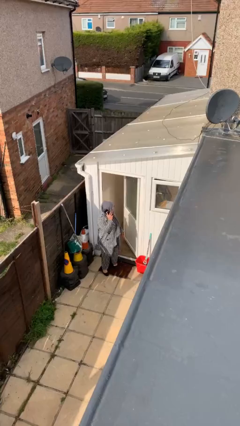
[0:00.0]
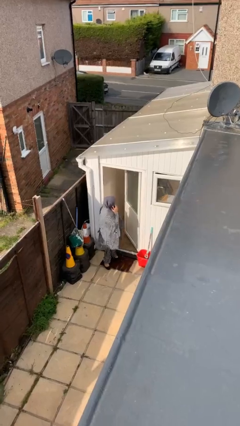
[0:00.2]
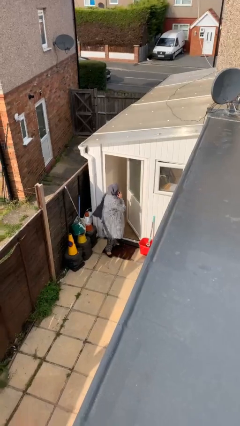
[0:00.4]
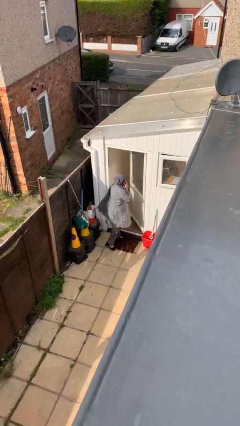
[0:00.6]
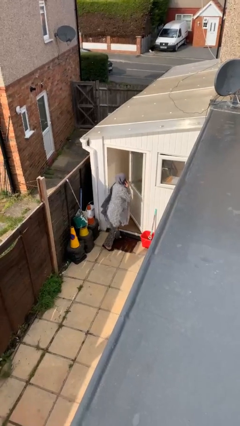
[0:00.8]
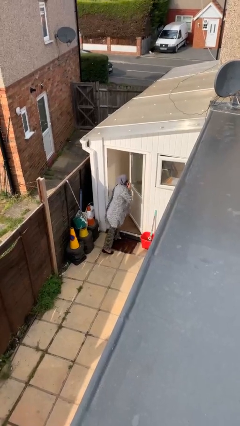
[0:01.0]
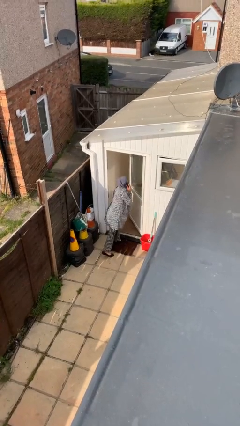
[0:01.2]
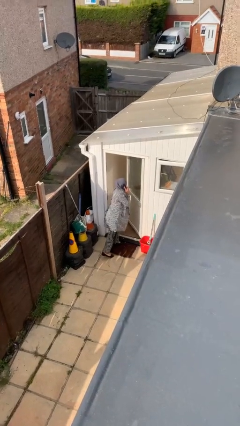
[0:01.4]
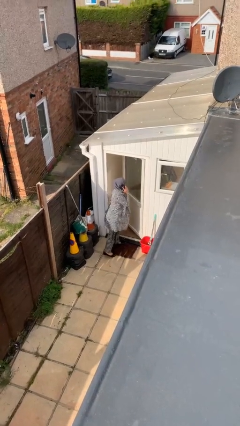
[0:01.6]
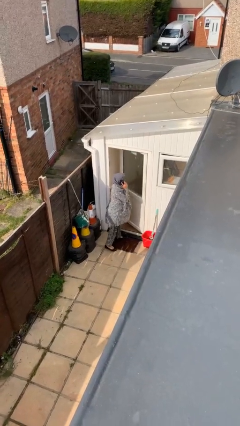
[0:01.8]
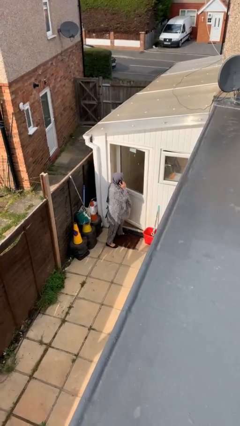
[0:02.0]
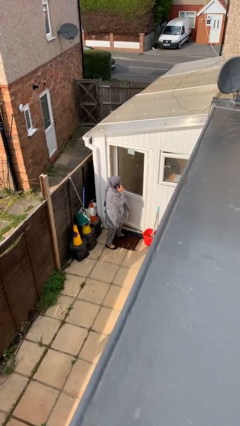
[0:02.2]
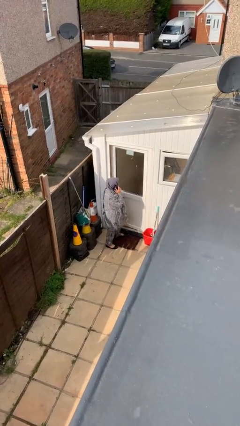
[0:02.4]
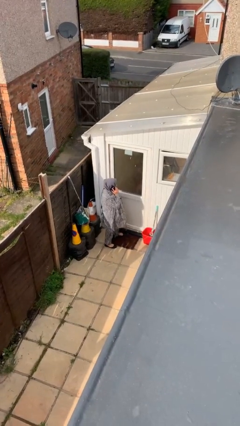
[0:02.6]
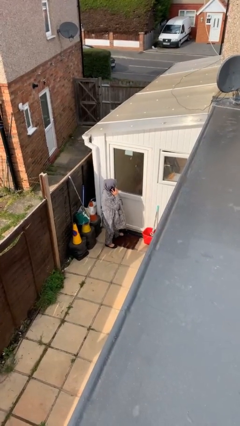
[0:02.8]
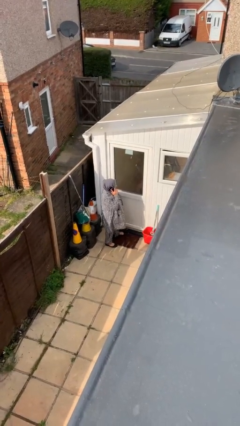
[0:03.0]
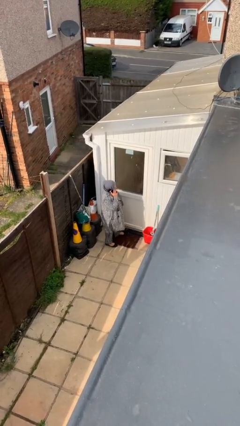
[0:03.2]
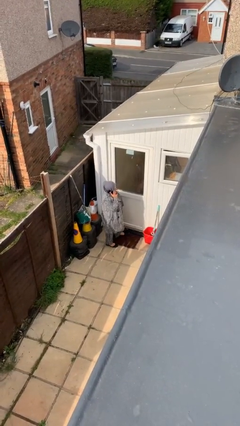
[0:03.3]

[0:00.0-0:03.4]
person closes facility door

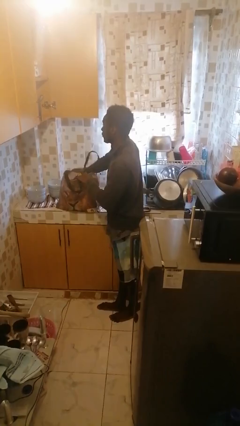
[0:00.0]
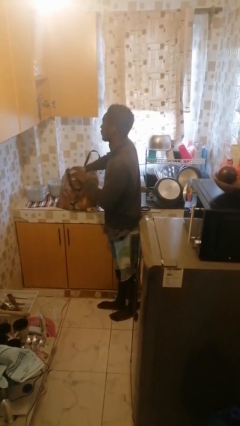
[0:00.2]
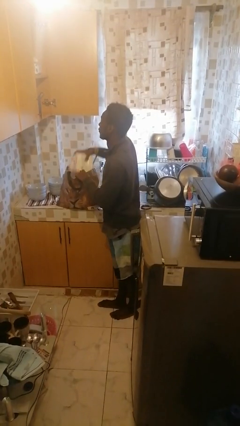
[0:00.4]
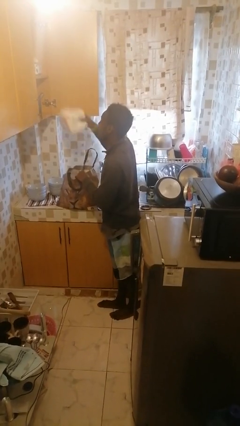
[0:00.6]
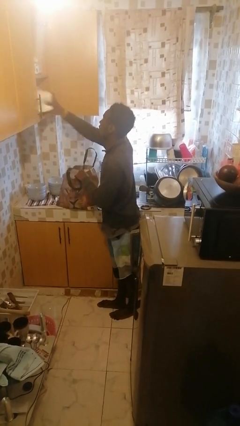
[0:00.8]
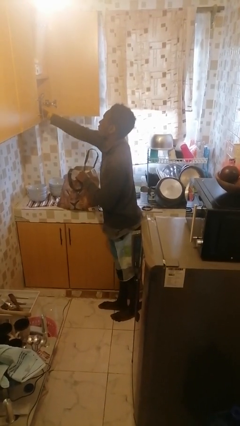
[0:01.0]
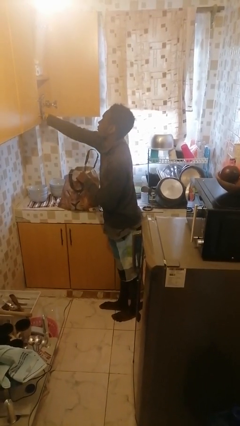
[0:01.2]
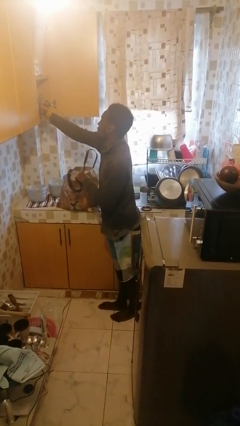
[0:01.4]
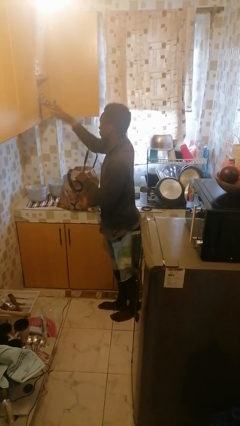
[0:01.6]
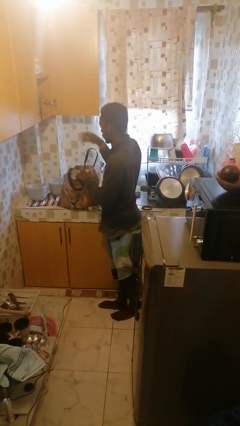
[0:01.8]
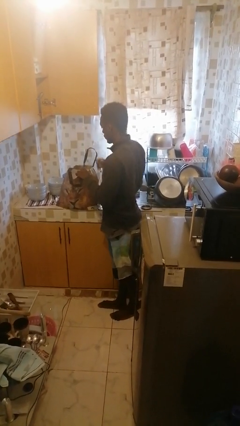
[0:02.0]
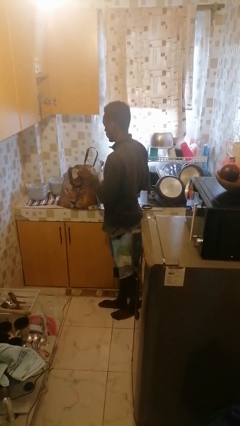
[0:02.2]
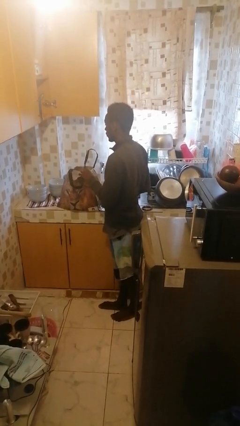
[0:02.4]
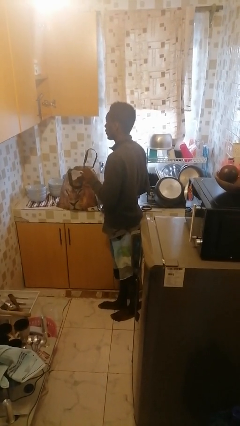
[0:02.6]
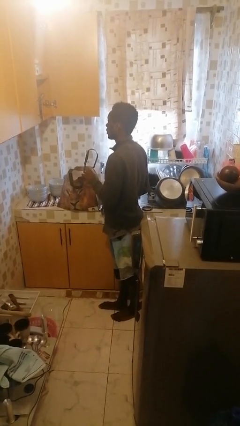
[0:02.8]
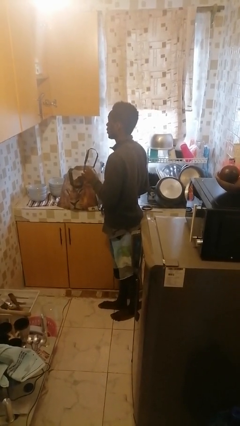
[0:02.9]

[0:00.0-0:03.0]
person loads groceries into cabinet

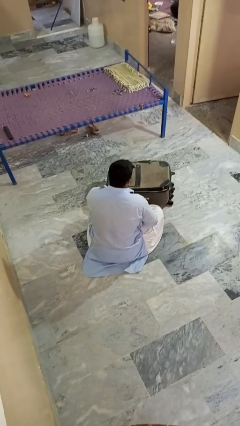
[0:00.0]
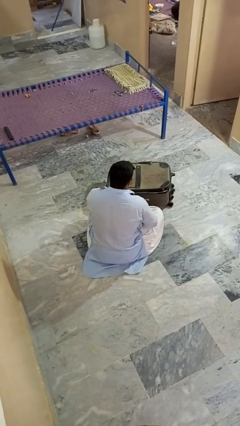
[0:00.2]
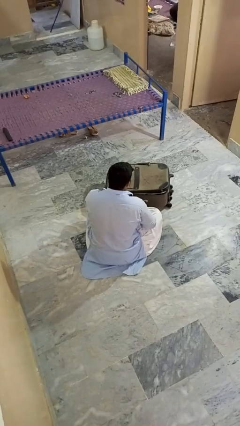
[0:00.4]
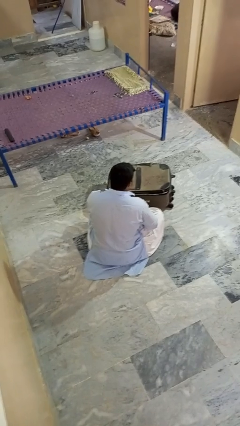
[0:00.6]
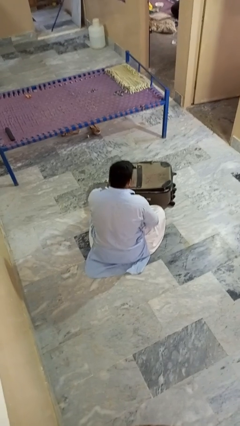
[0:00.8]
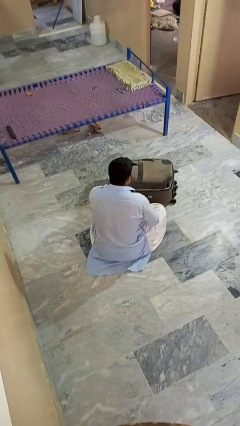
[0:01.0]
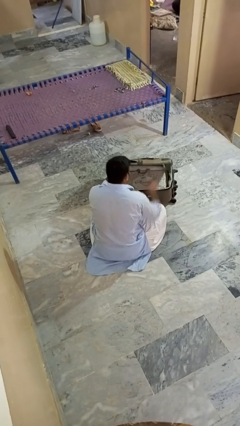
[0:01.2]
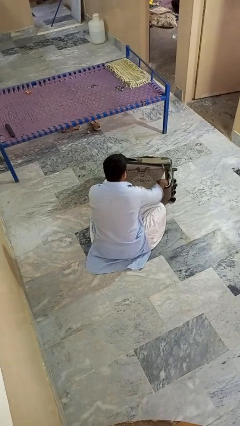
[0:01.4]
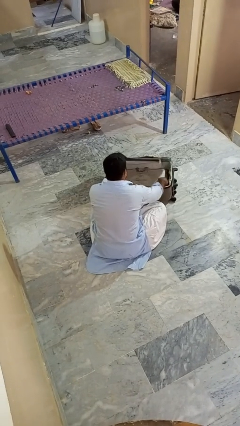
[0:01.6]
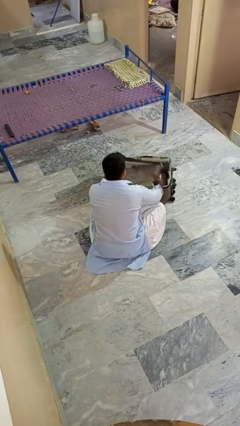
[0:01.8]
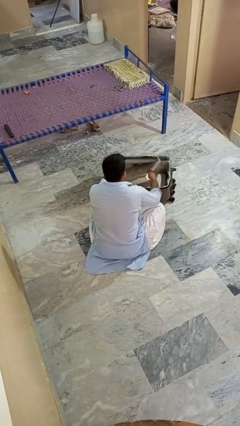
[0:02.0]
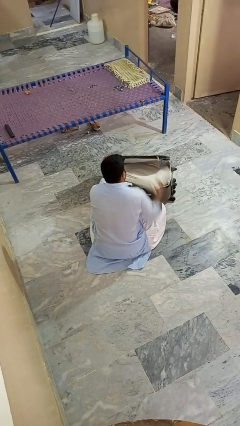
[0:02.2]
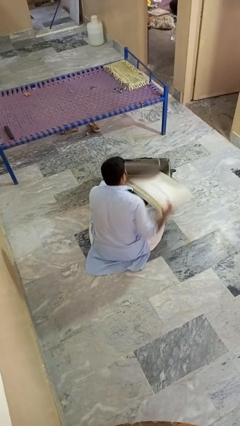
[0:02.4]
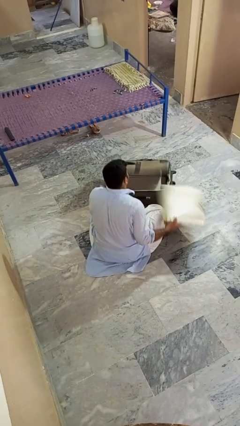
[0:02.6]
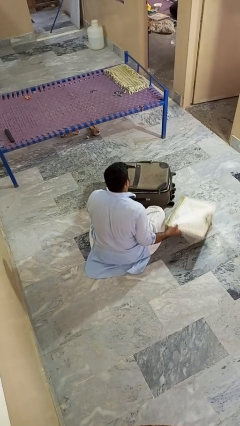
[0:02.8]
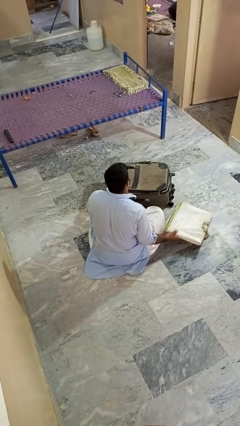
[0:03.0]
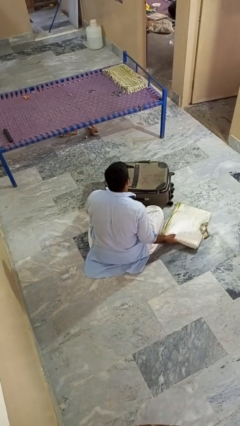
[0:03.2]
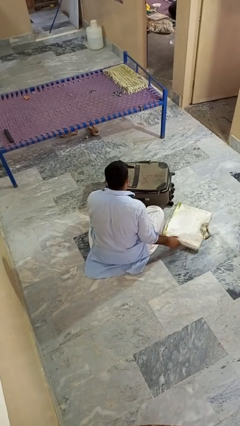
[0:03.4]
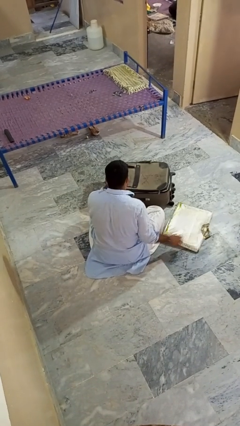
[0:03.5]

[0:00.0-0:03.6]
person takes object from bag

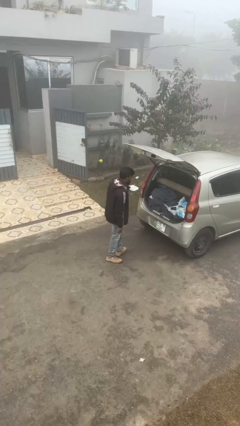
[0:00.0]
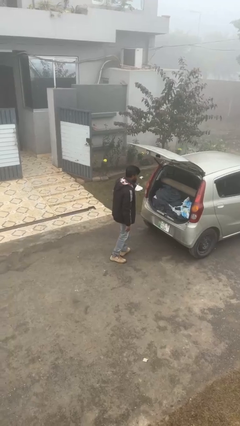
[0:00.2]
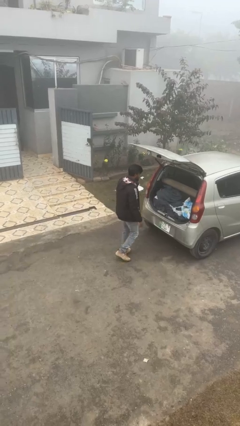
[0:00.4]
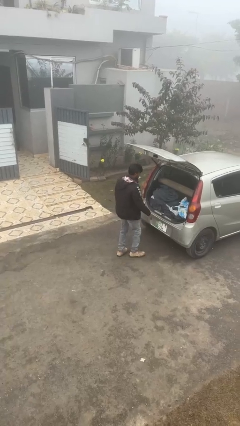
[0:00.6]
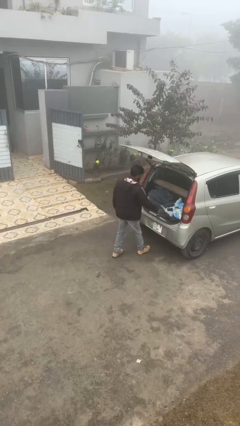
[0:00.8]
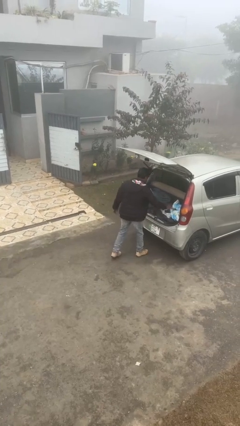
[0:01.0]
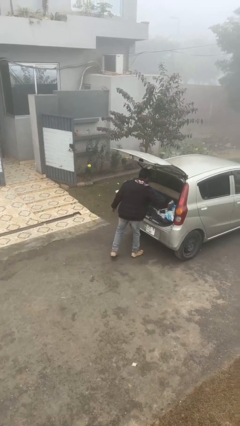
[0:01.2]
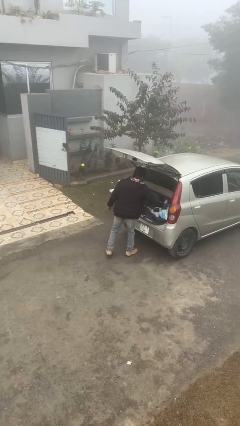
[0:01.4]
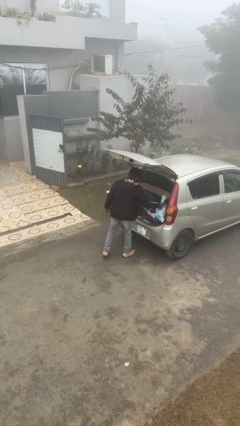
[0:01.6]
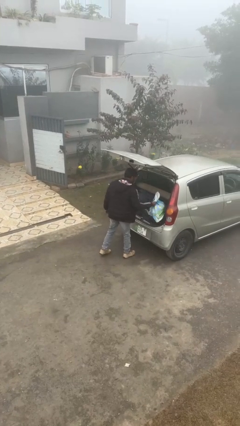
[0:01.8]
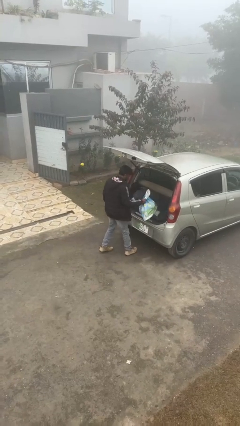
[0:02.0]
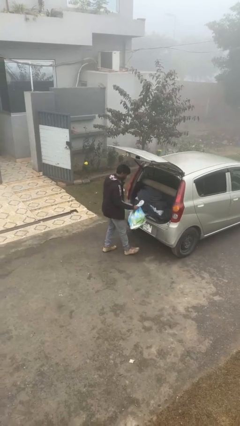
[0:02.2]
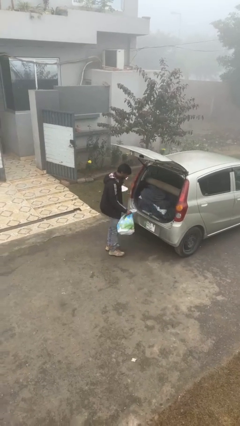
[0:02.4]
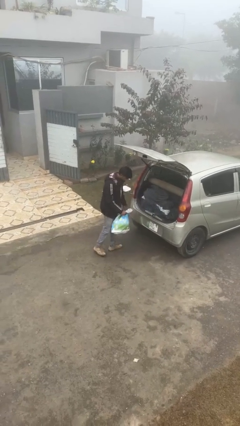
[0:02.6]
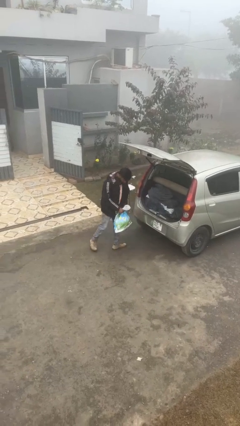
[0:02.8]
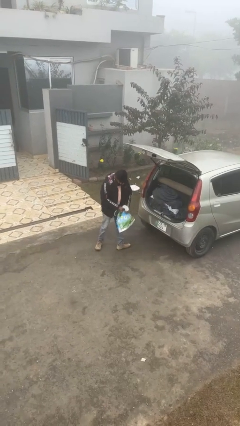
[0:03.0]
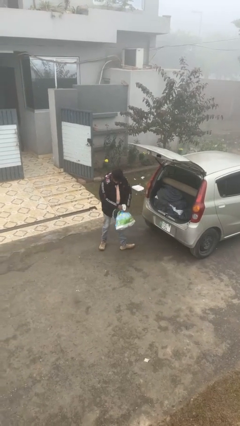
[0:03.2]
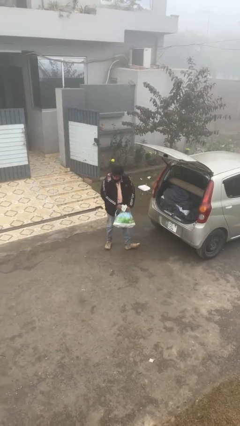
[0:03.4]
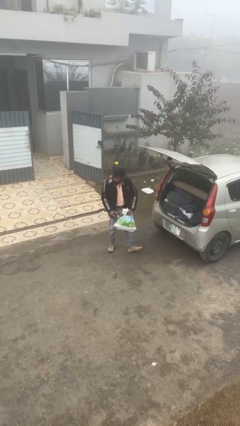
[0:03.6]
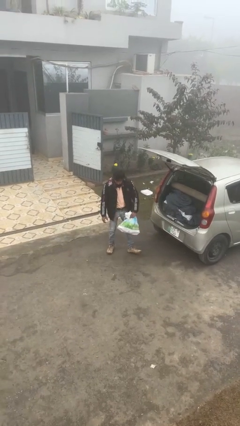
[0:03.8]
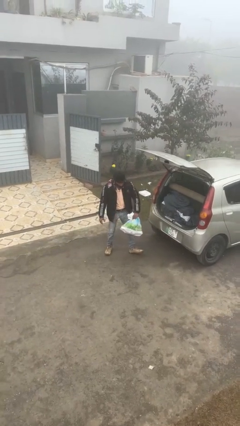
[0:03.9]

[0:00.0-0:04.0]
person unloads car

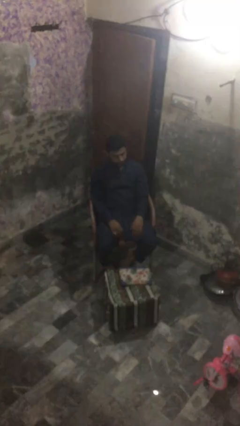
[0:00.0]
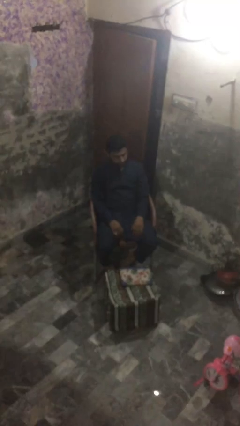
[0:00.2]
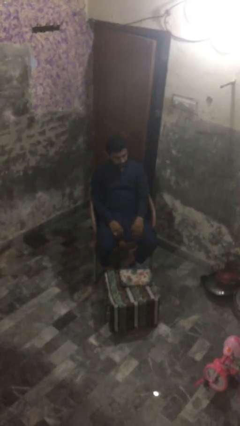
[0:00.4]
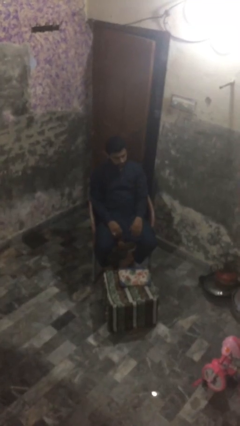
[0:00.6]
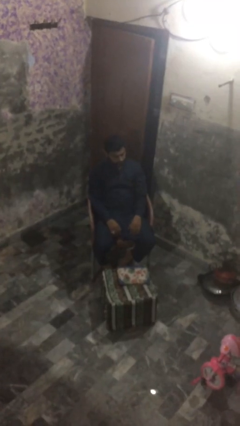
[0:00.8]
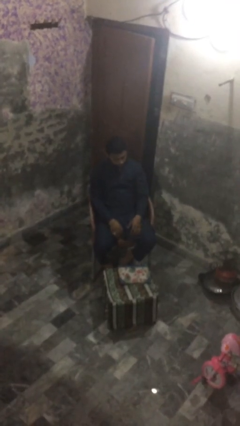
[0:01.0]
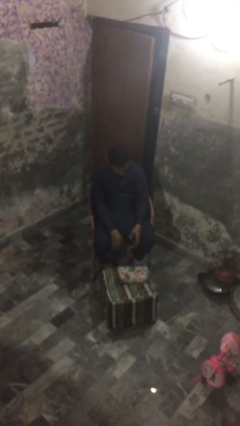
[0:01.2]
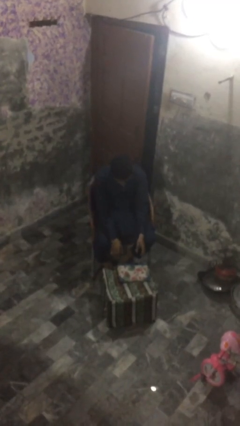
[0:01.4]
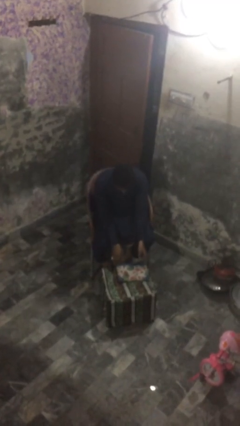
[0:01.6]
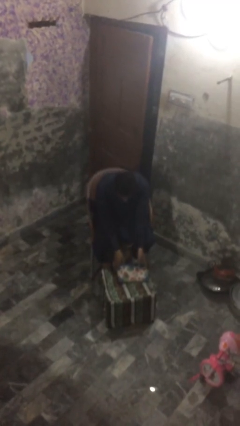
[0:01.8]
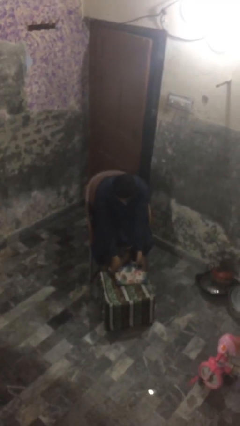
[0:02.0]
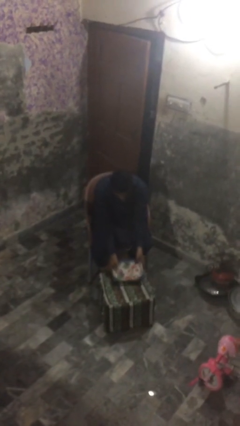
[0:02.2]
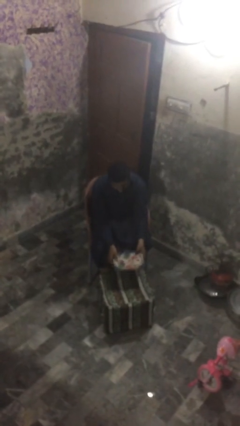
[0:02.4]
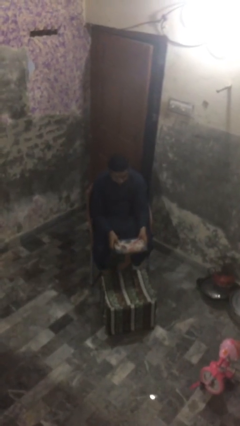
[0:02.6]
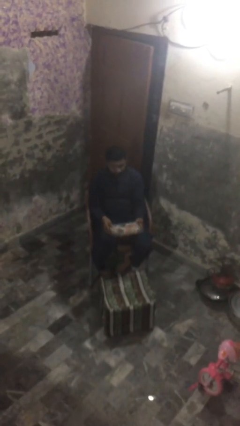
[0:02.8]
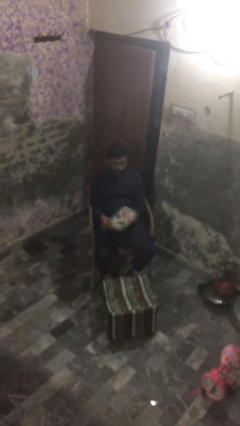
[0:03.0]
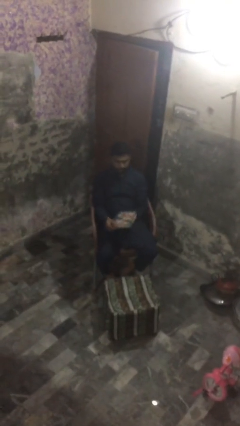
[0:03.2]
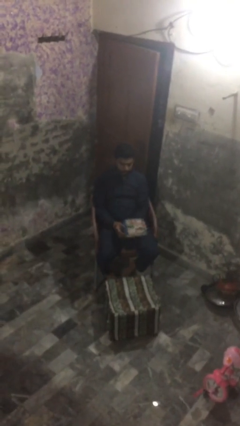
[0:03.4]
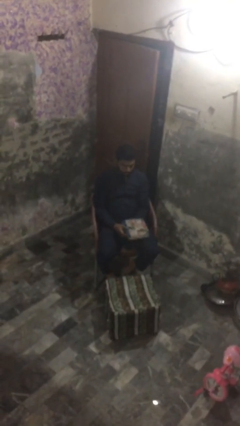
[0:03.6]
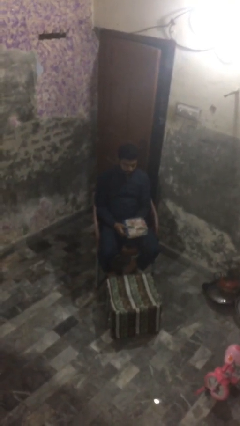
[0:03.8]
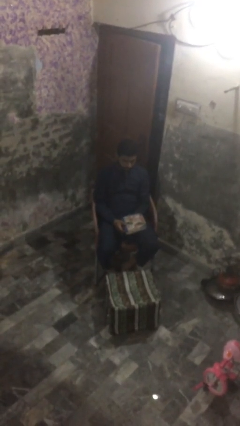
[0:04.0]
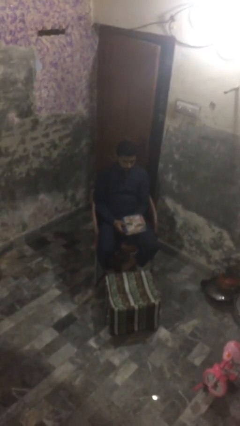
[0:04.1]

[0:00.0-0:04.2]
person picks up object from table
